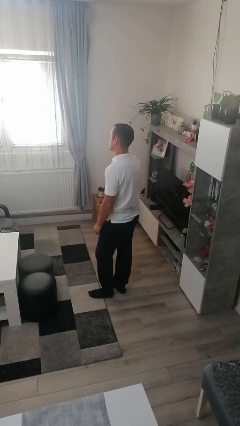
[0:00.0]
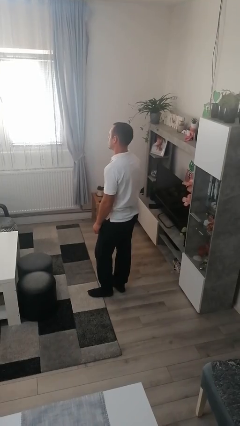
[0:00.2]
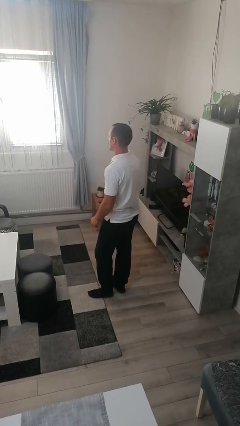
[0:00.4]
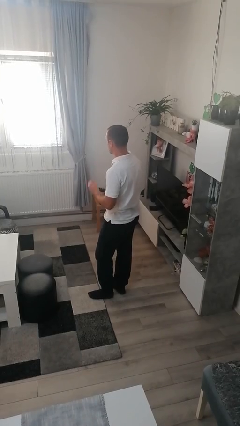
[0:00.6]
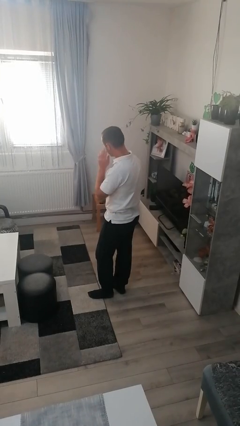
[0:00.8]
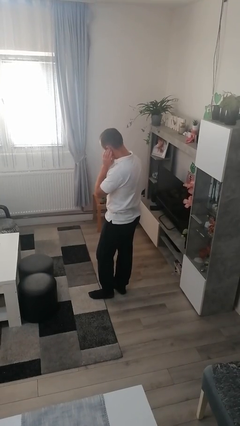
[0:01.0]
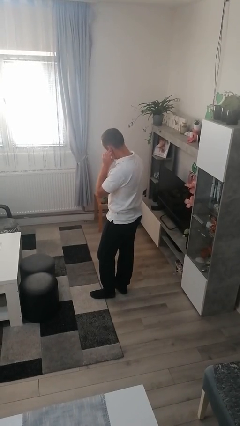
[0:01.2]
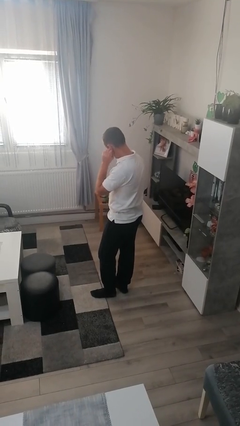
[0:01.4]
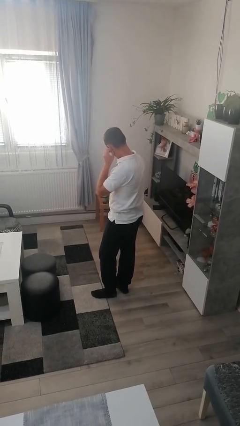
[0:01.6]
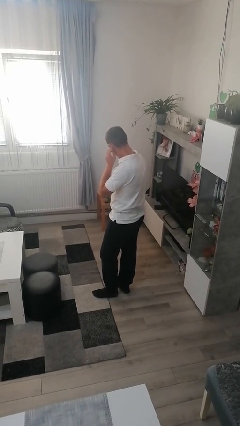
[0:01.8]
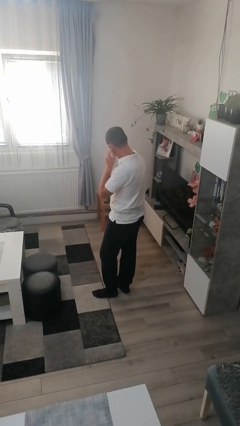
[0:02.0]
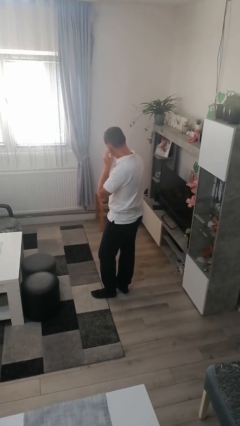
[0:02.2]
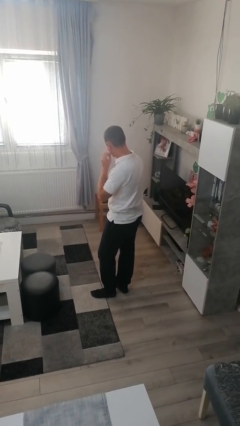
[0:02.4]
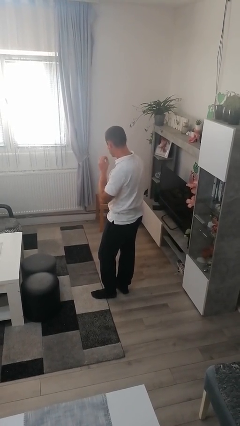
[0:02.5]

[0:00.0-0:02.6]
person touches earlobe

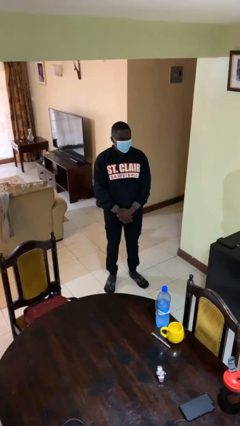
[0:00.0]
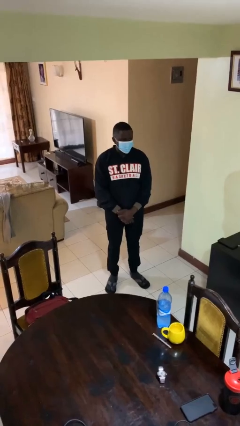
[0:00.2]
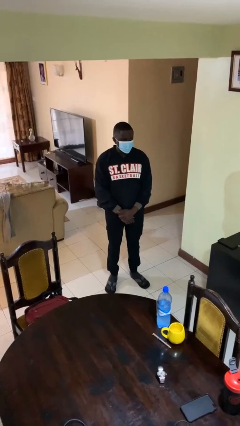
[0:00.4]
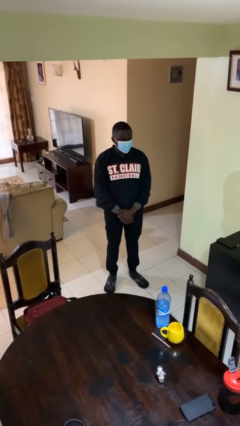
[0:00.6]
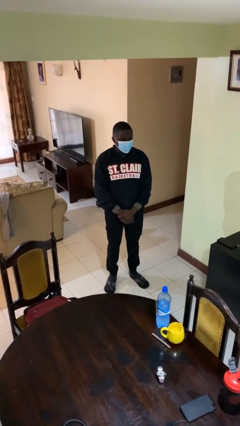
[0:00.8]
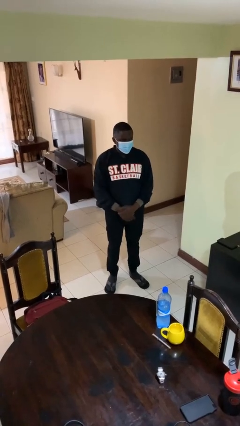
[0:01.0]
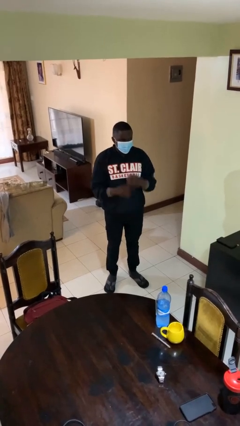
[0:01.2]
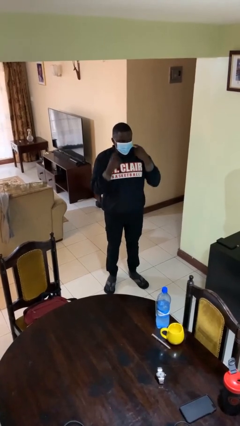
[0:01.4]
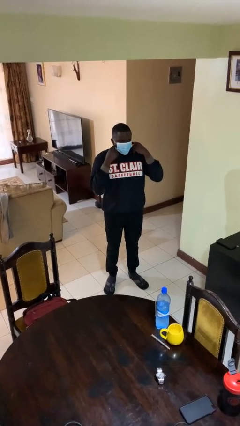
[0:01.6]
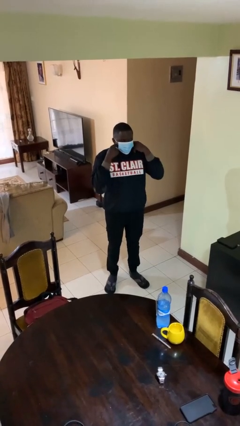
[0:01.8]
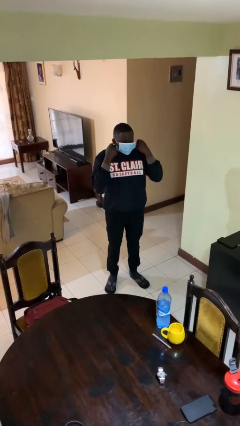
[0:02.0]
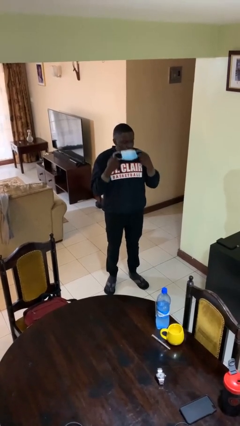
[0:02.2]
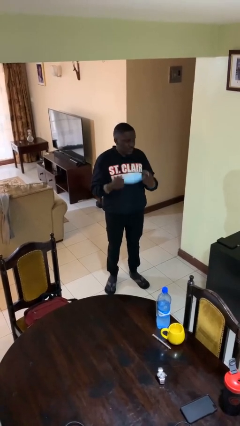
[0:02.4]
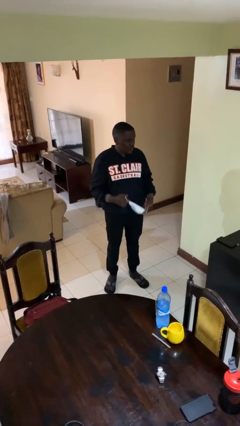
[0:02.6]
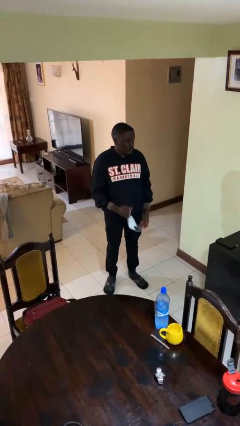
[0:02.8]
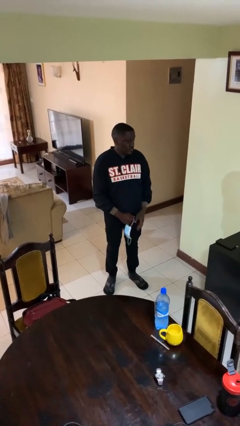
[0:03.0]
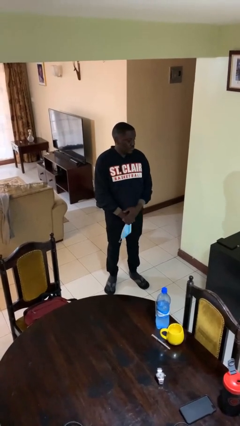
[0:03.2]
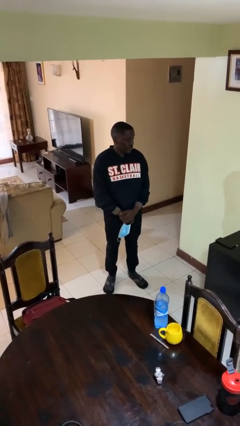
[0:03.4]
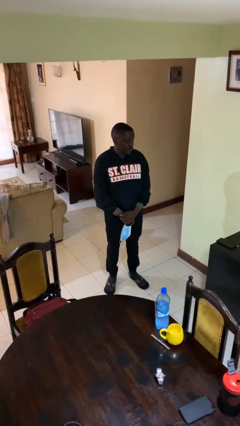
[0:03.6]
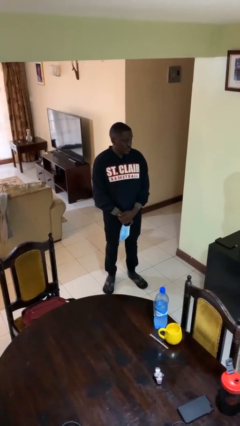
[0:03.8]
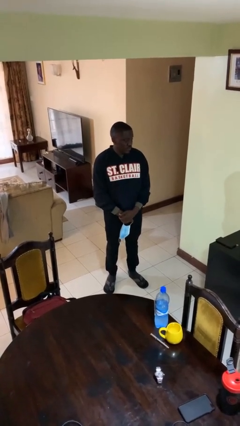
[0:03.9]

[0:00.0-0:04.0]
person takes off facemask

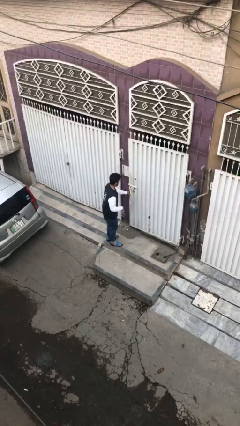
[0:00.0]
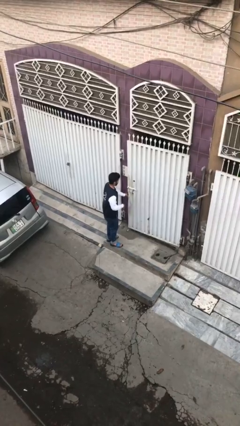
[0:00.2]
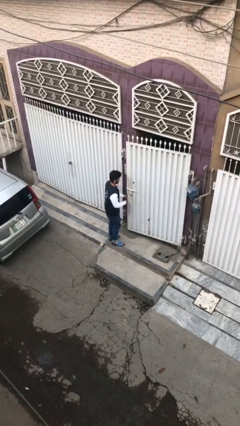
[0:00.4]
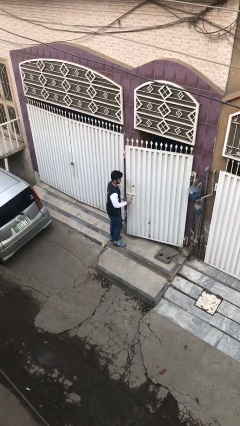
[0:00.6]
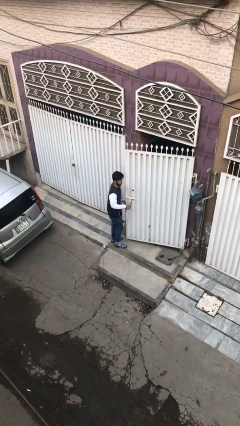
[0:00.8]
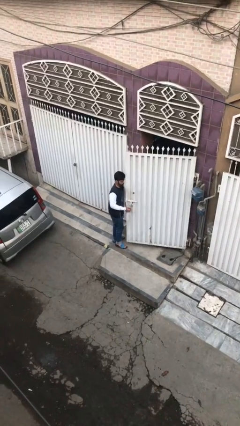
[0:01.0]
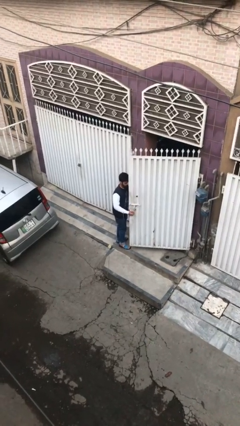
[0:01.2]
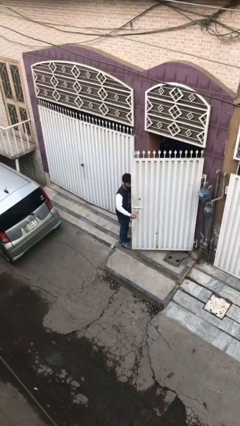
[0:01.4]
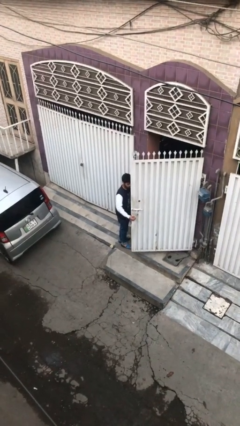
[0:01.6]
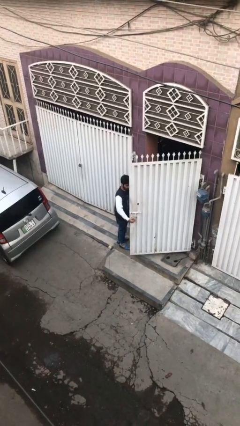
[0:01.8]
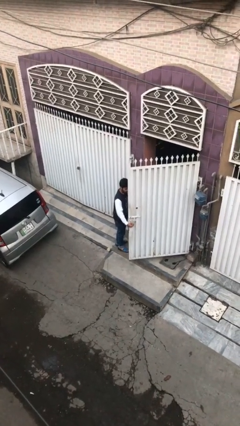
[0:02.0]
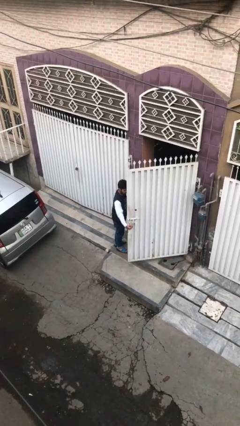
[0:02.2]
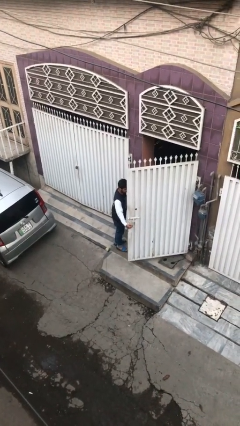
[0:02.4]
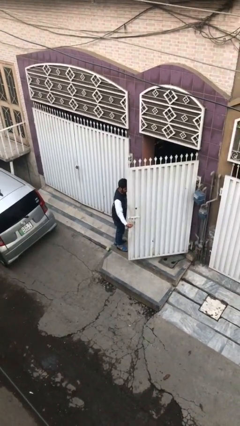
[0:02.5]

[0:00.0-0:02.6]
person opens facility door

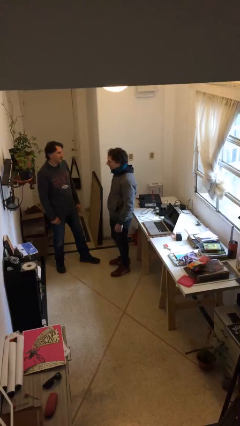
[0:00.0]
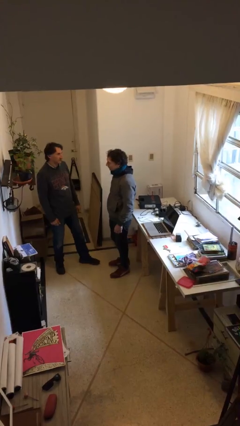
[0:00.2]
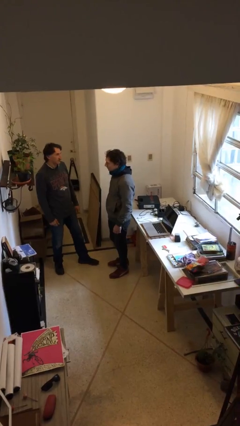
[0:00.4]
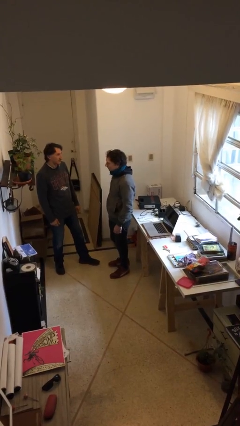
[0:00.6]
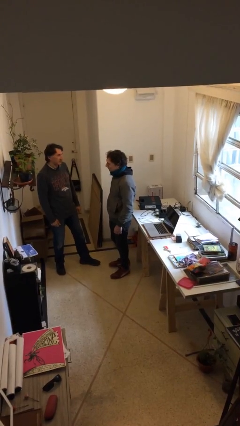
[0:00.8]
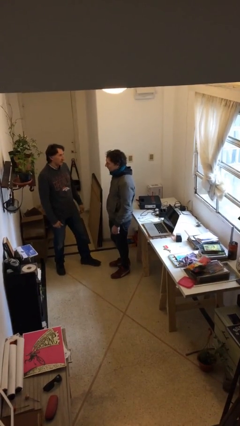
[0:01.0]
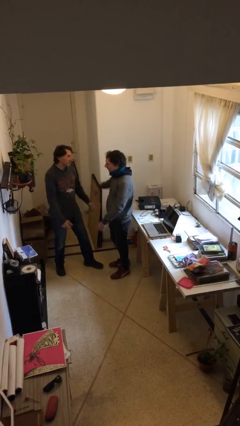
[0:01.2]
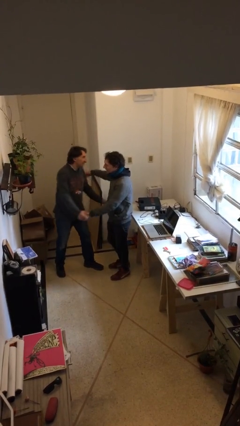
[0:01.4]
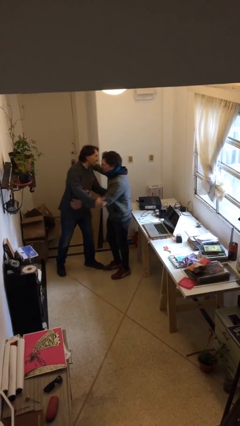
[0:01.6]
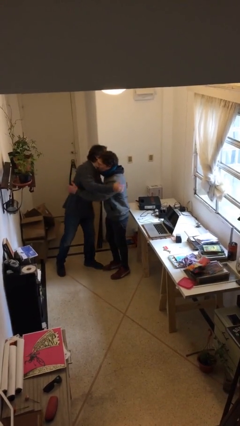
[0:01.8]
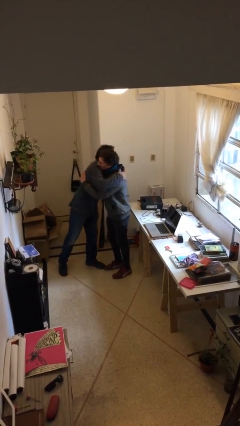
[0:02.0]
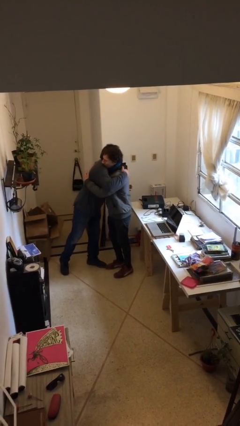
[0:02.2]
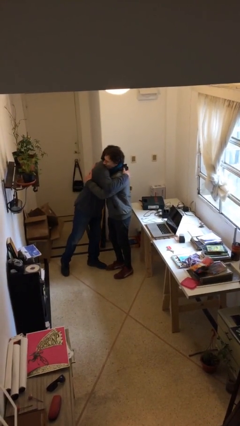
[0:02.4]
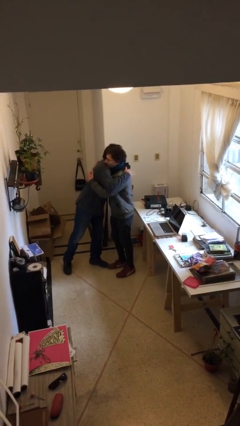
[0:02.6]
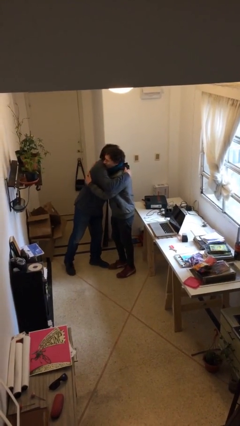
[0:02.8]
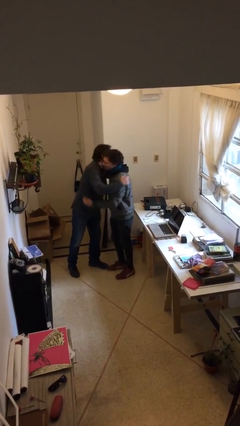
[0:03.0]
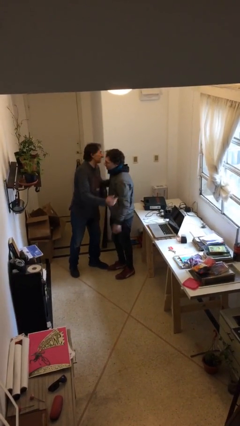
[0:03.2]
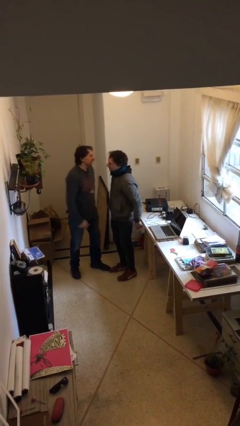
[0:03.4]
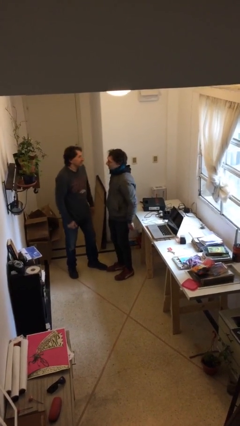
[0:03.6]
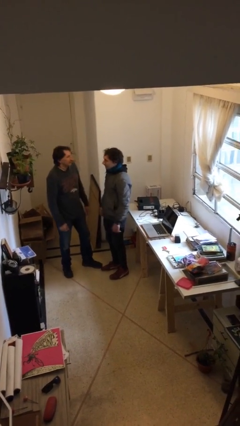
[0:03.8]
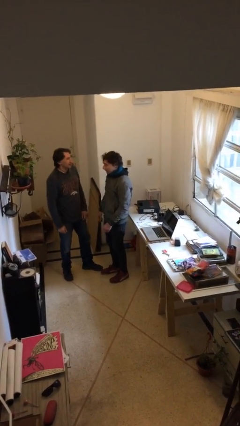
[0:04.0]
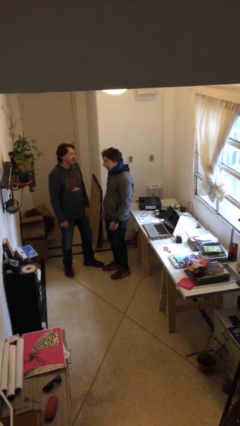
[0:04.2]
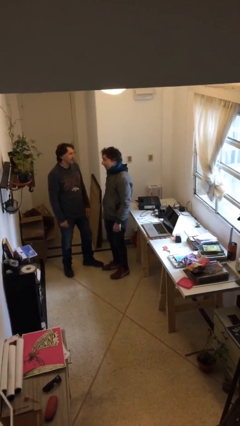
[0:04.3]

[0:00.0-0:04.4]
person embraces person

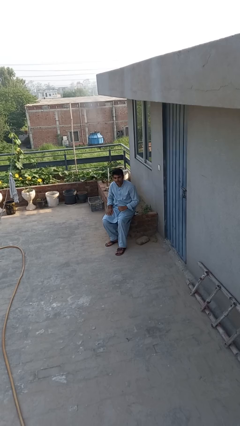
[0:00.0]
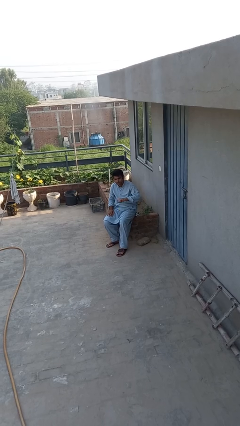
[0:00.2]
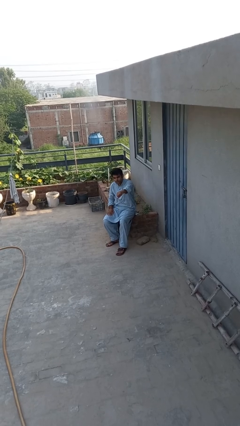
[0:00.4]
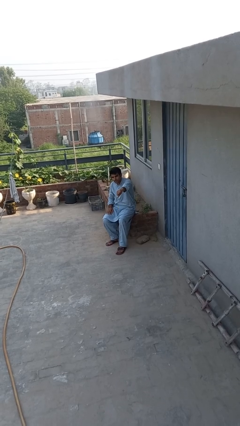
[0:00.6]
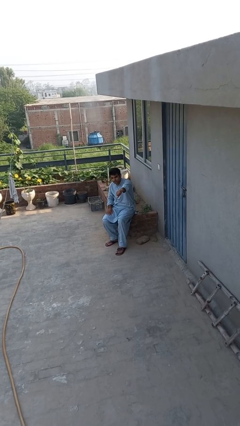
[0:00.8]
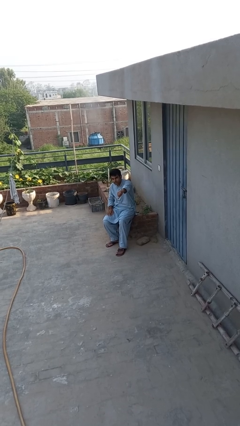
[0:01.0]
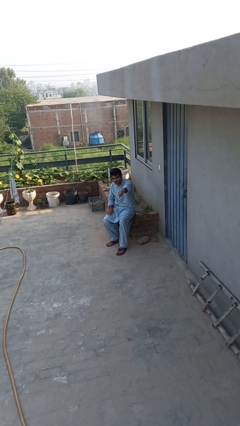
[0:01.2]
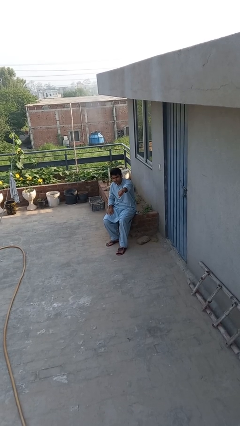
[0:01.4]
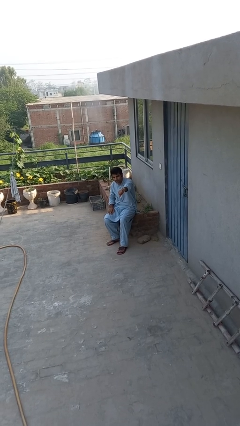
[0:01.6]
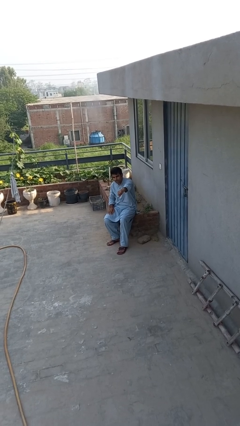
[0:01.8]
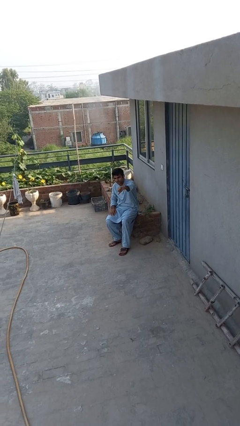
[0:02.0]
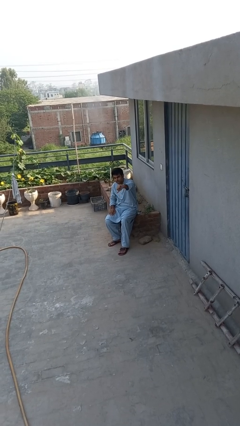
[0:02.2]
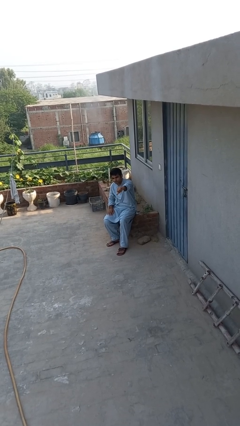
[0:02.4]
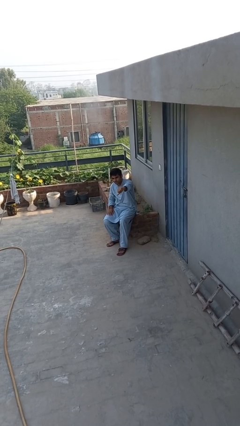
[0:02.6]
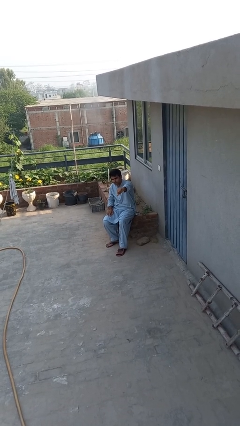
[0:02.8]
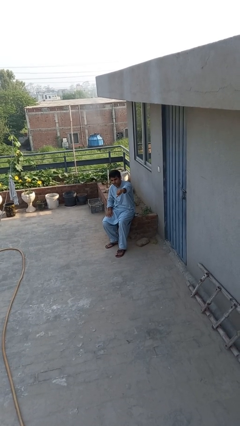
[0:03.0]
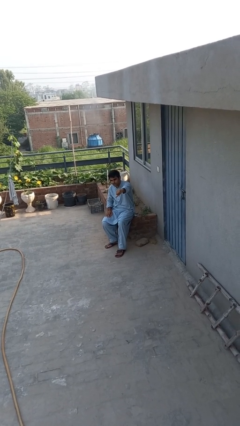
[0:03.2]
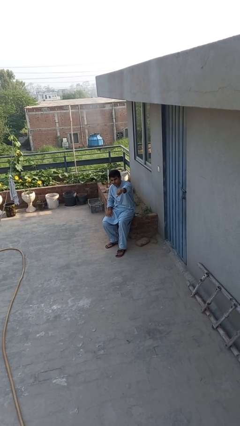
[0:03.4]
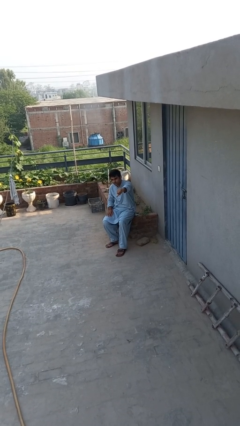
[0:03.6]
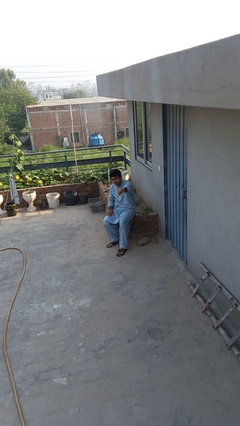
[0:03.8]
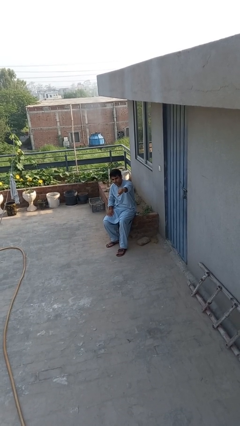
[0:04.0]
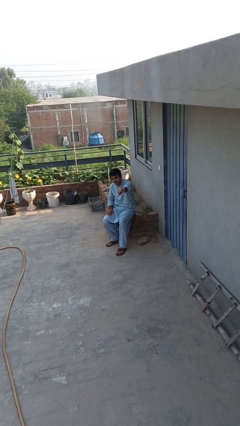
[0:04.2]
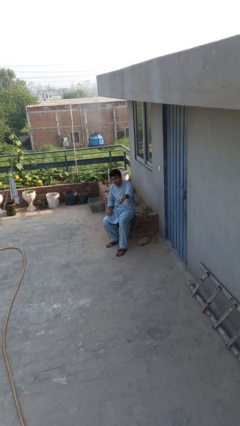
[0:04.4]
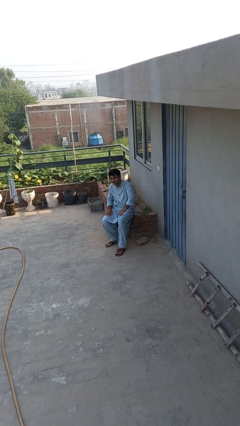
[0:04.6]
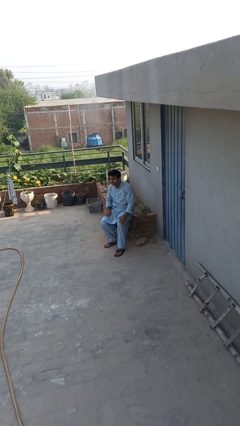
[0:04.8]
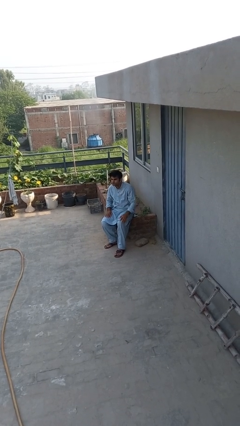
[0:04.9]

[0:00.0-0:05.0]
person gestures thumbs down
